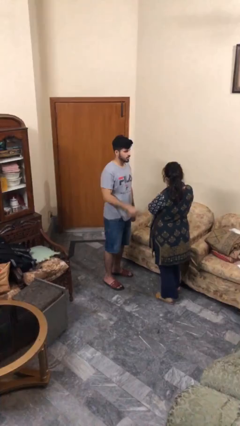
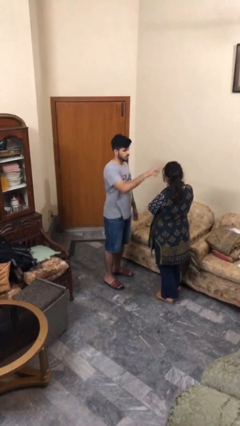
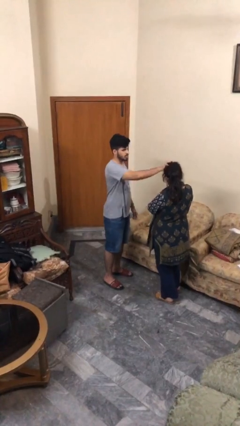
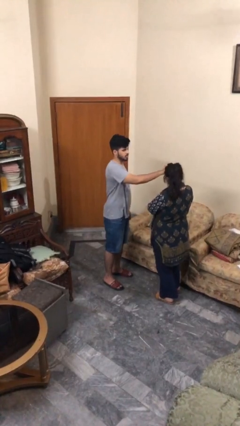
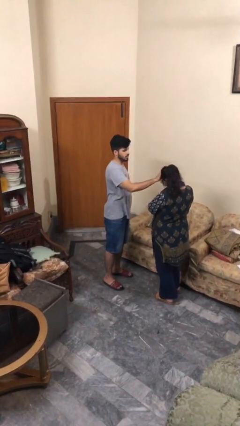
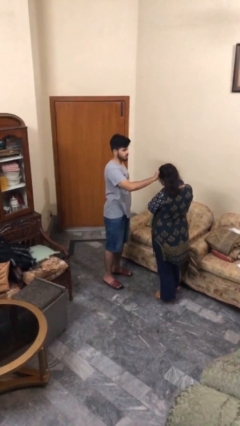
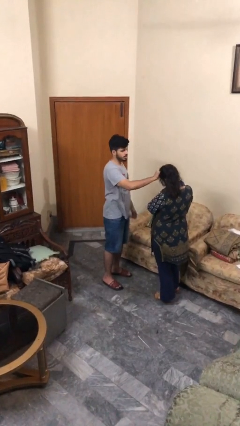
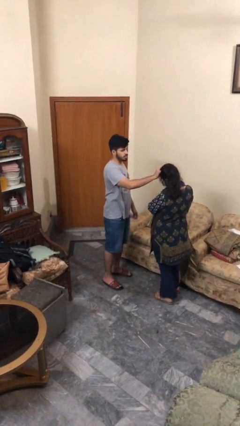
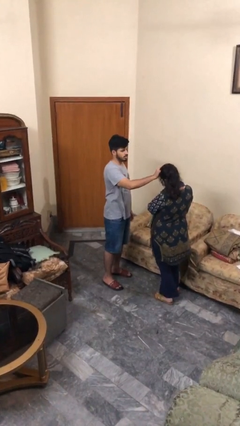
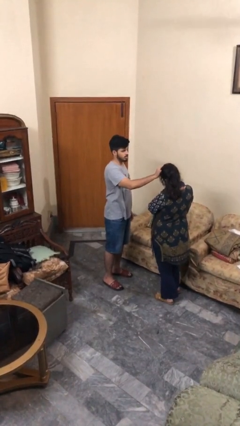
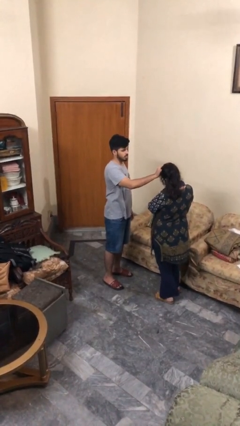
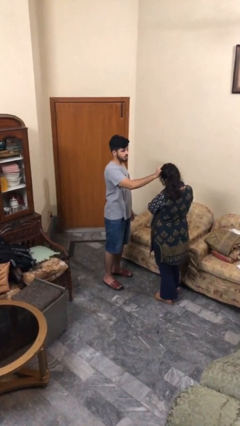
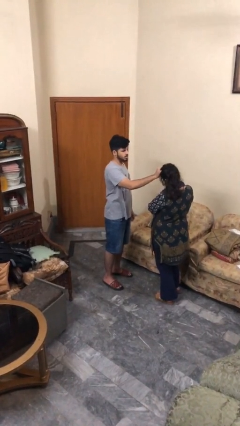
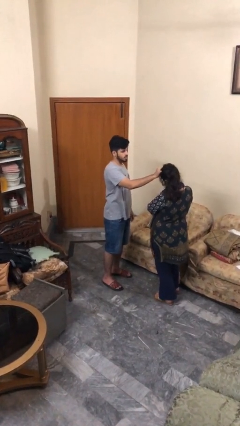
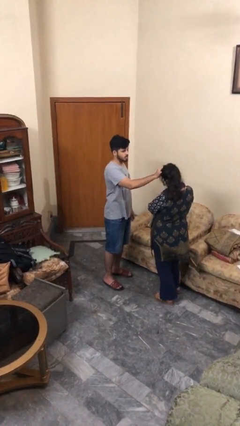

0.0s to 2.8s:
person grabs person by hair

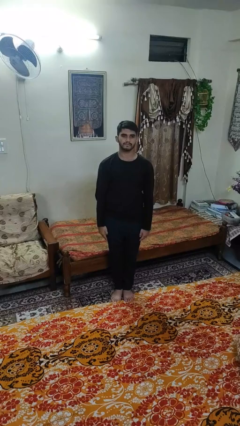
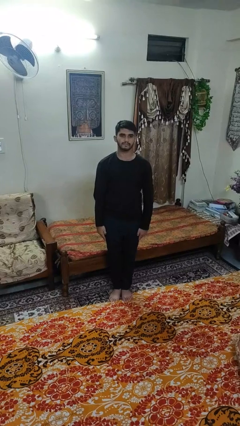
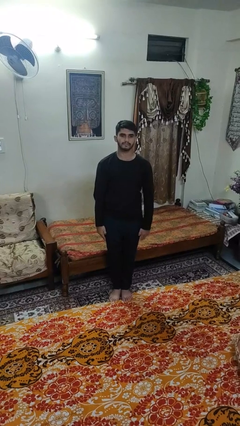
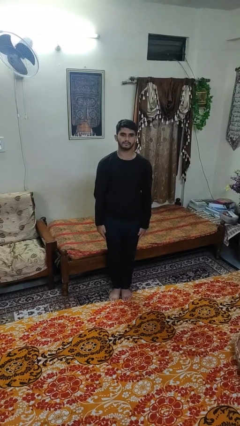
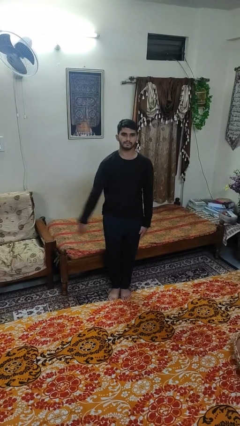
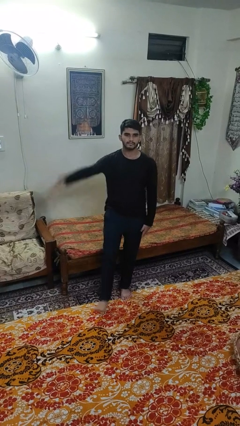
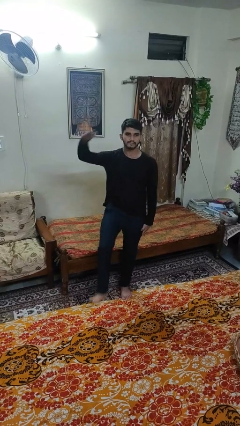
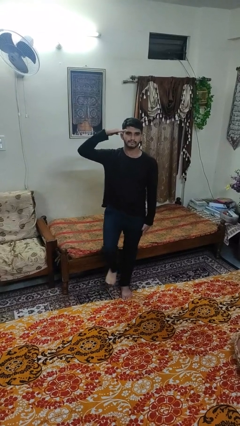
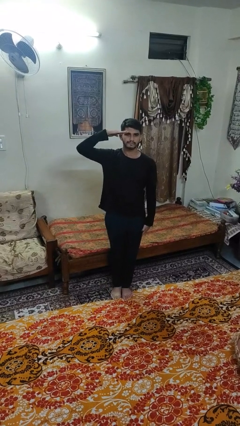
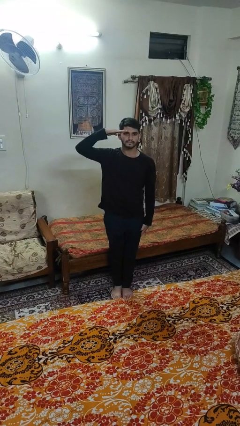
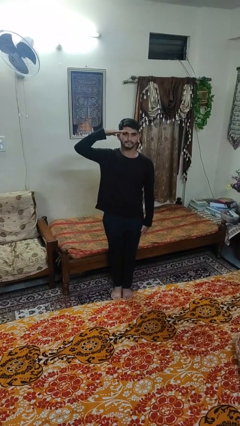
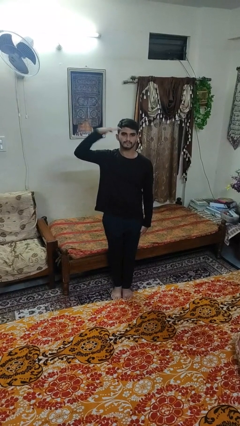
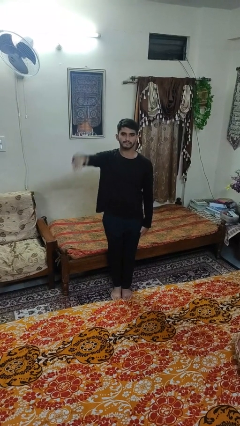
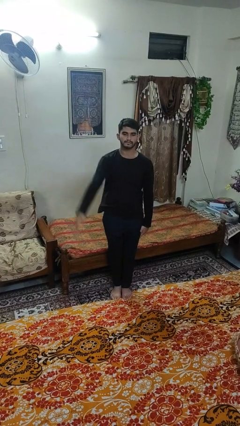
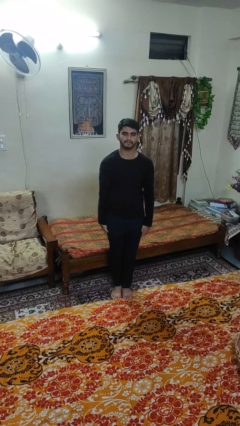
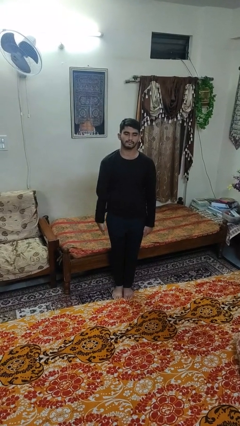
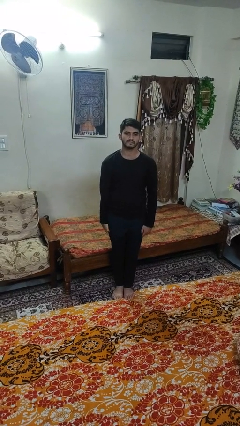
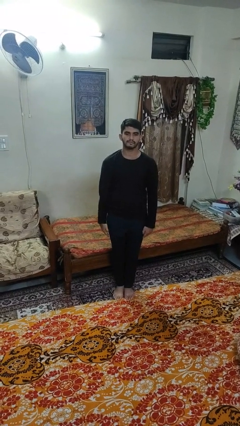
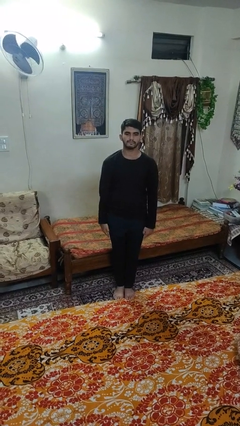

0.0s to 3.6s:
person salutes

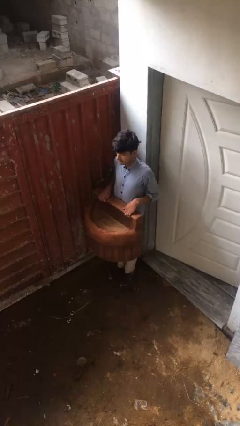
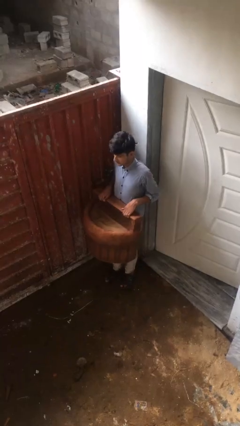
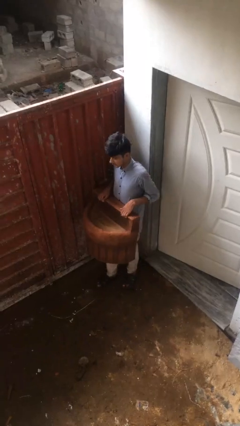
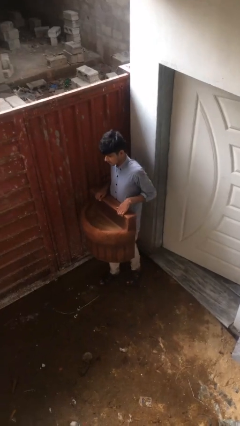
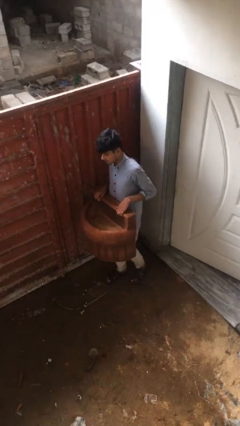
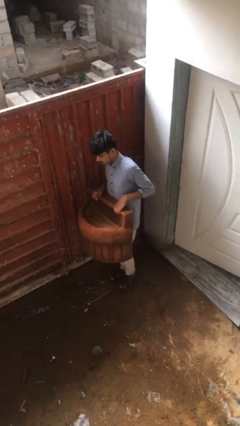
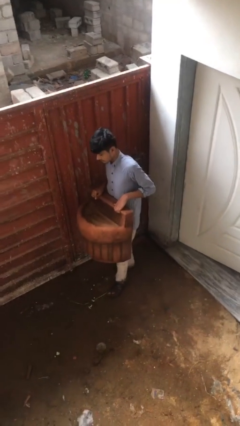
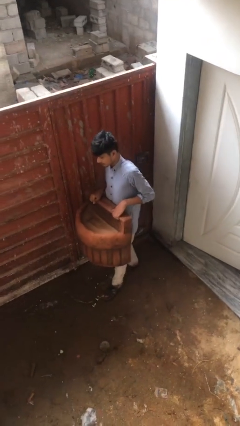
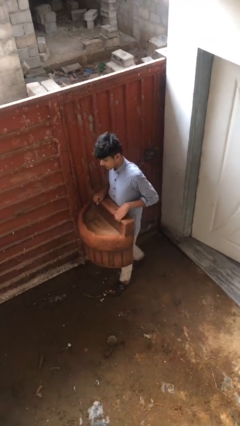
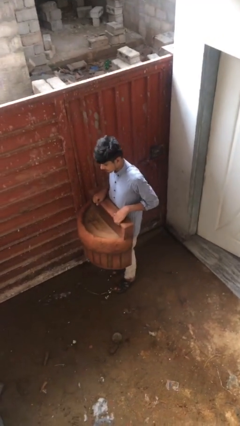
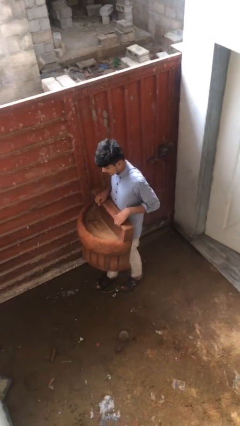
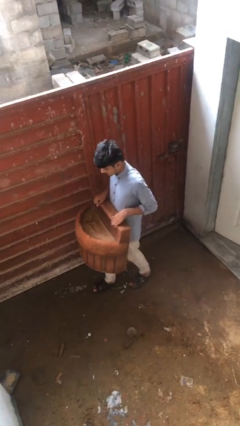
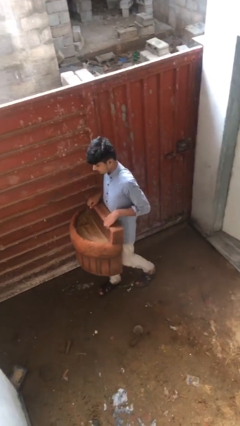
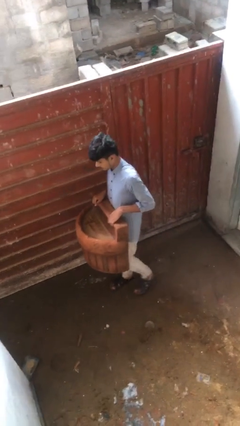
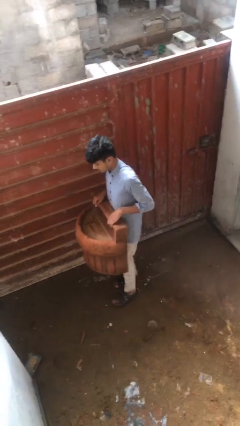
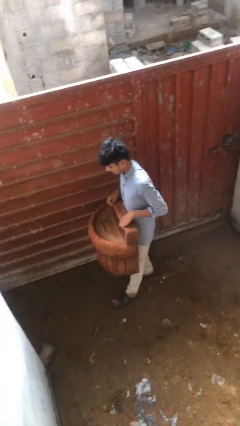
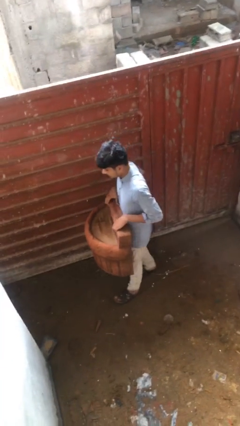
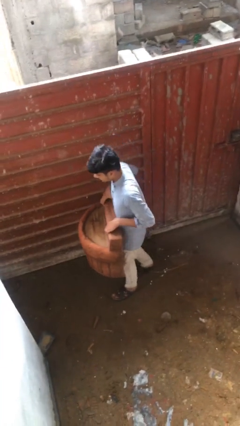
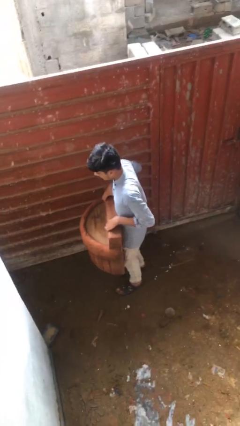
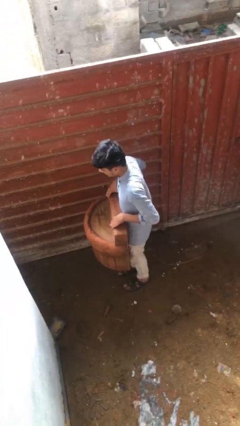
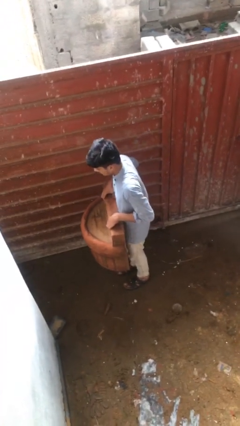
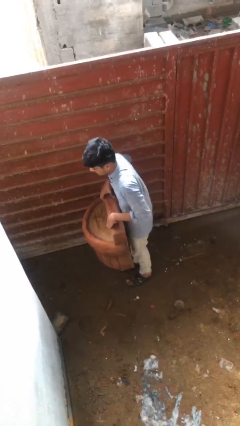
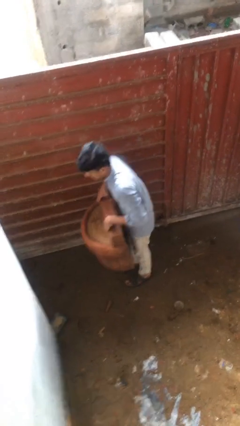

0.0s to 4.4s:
person carries heavy object

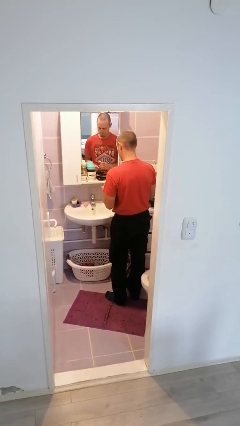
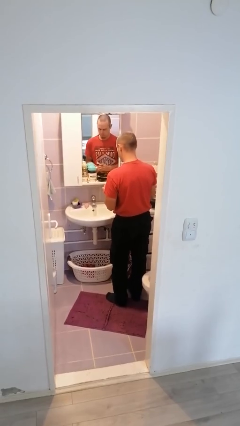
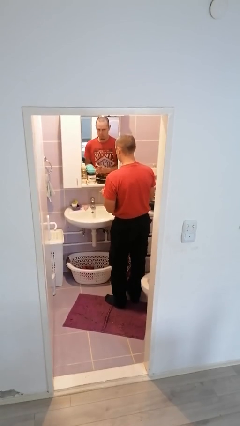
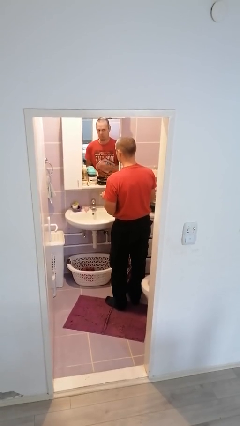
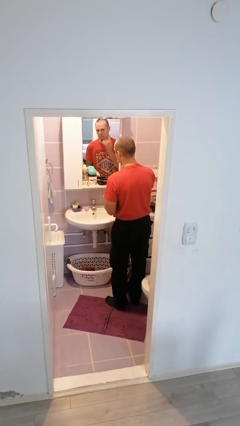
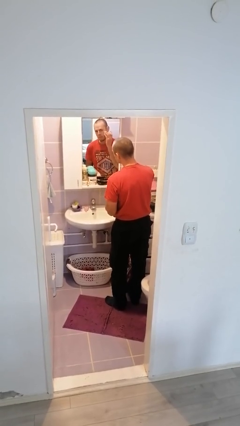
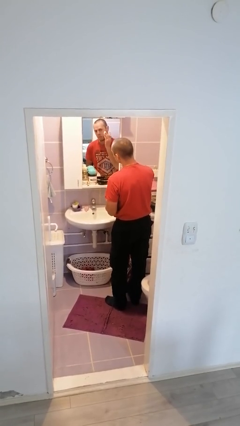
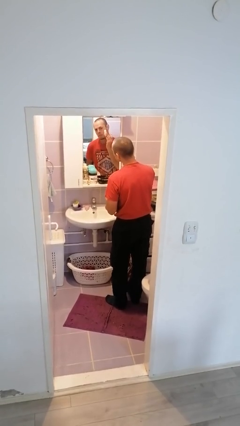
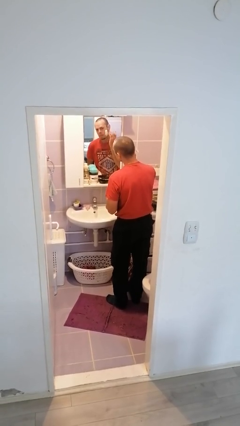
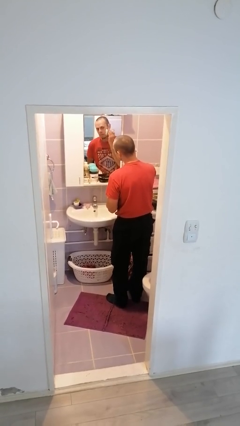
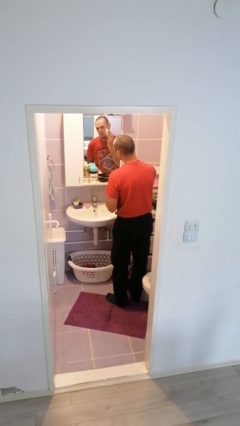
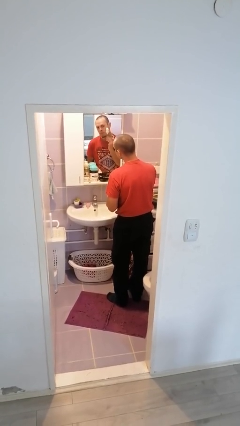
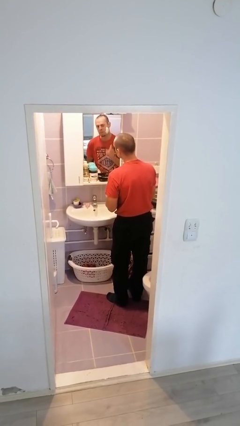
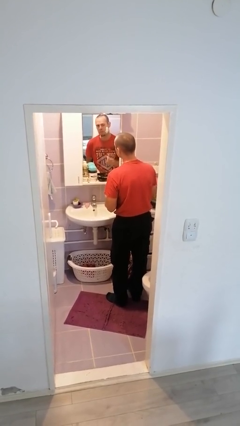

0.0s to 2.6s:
person applies shaving cream

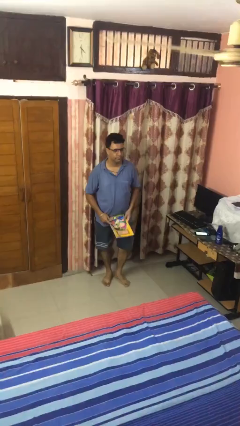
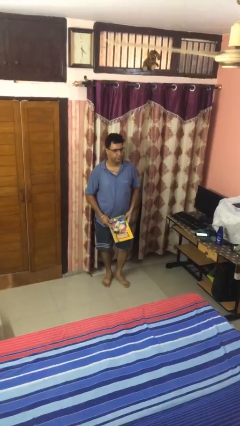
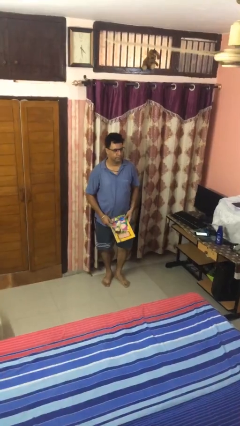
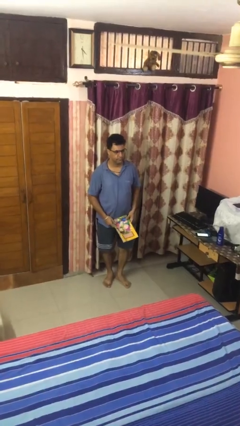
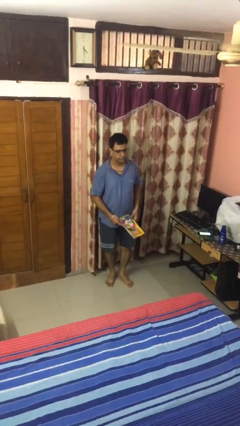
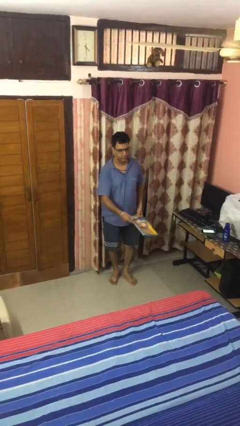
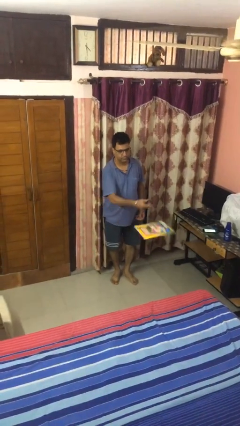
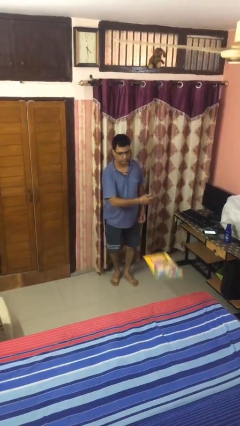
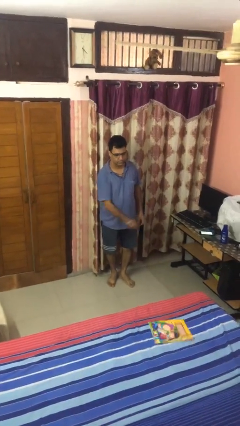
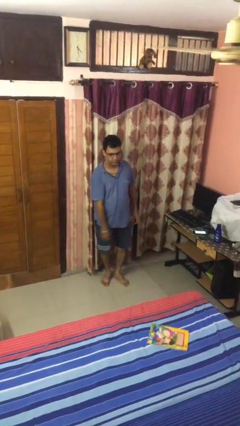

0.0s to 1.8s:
person throws object on bed

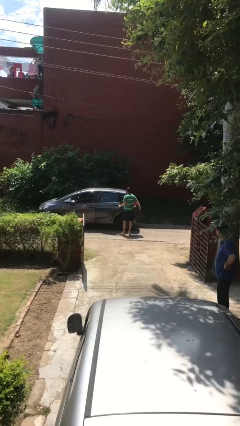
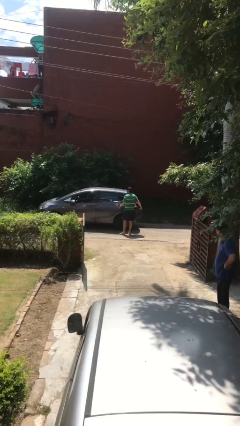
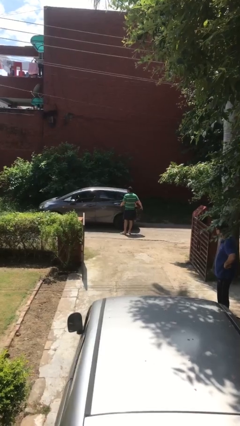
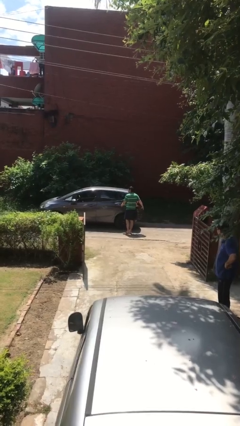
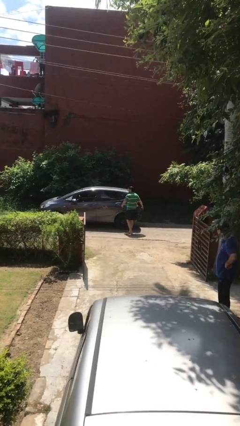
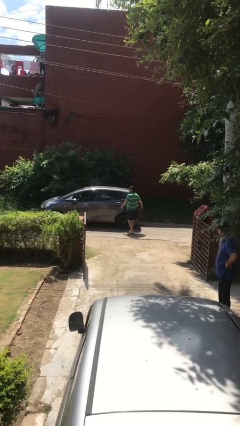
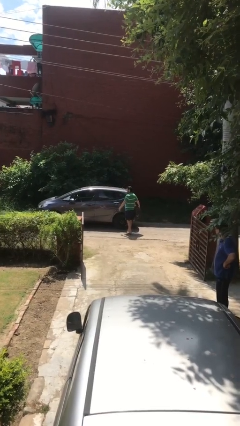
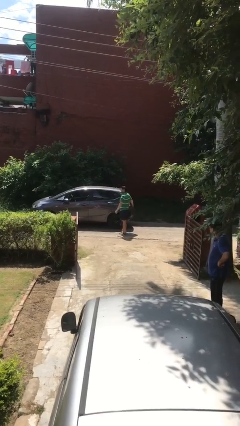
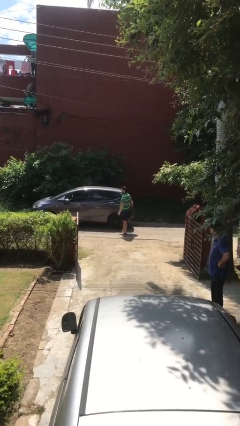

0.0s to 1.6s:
person closes car door

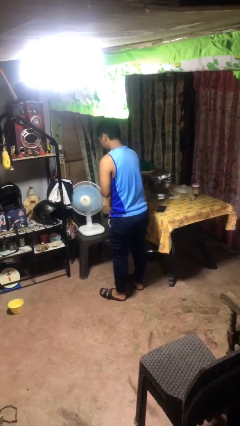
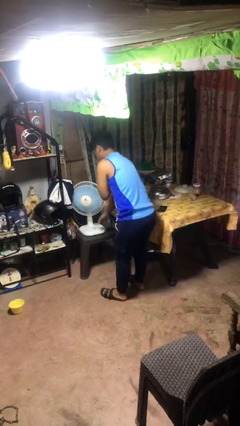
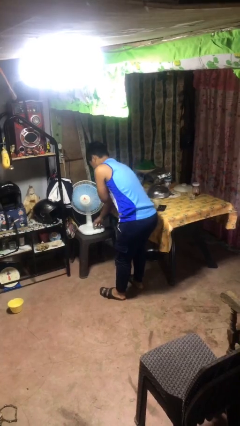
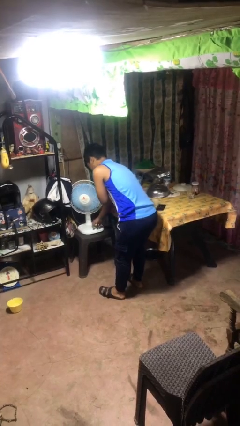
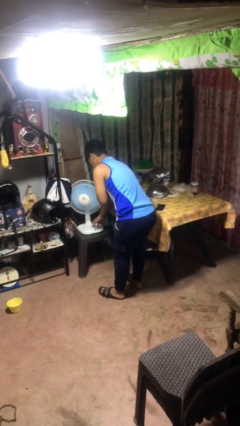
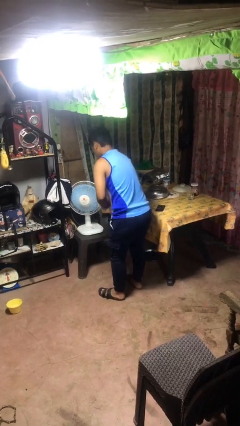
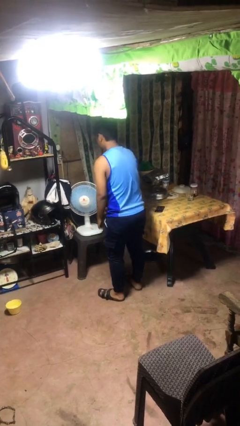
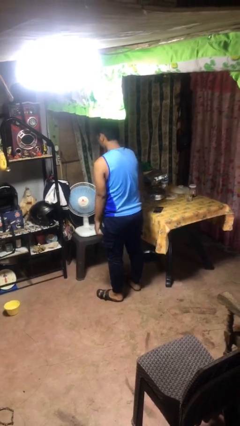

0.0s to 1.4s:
person turns on fan
